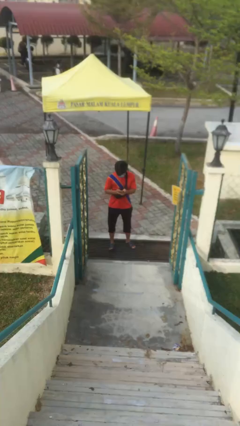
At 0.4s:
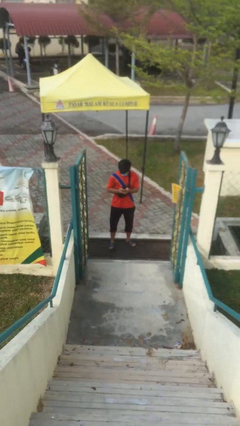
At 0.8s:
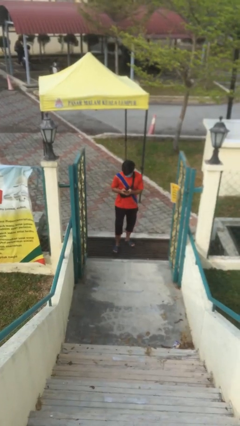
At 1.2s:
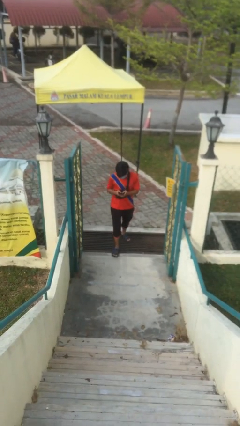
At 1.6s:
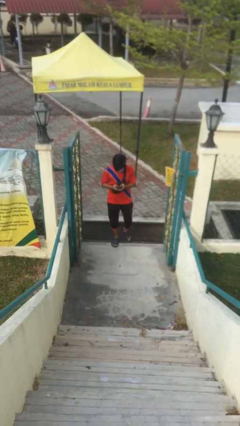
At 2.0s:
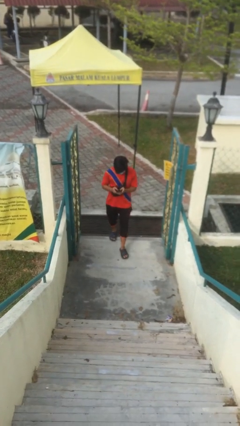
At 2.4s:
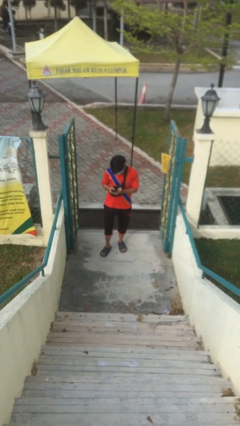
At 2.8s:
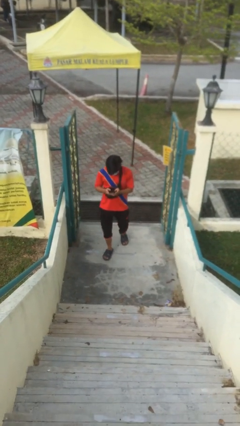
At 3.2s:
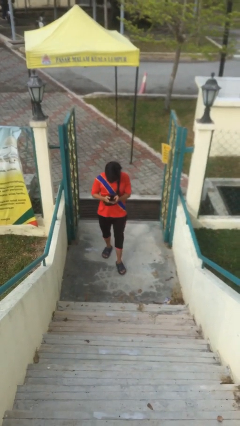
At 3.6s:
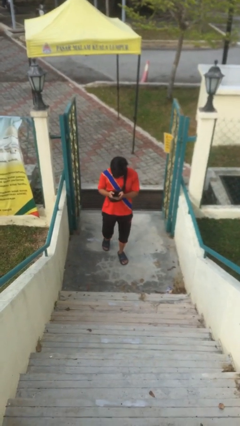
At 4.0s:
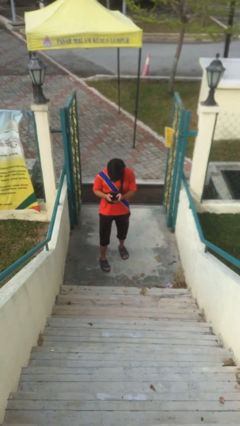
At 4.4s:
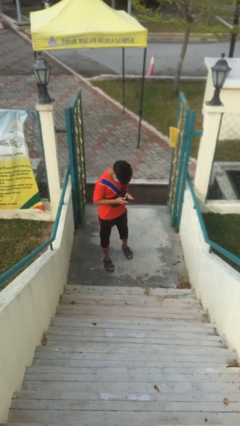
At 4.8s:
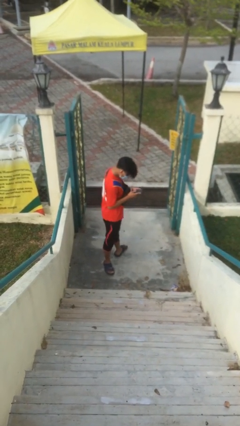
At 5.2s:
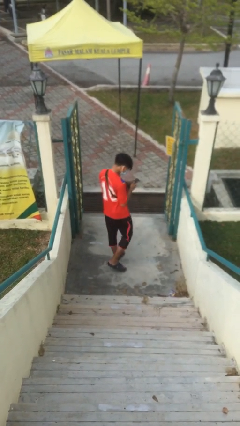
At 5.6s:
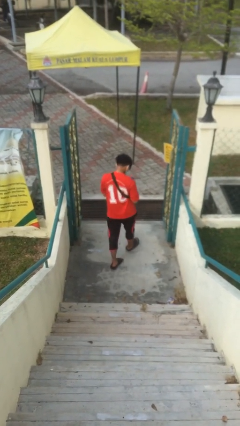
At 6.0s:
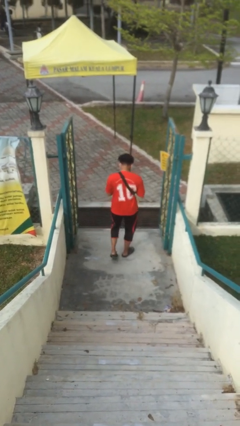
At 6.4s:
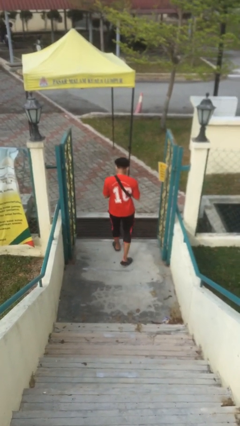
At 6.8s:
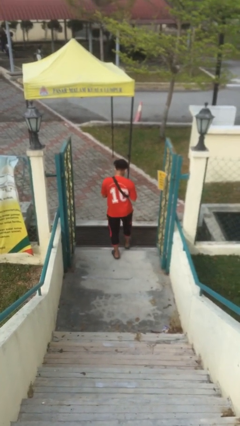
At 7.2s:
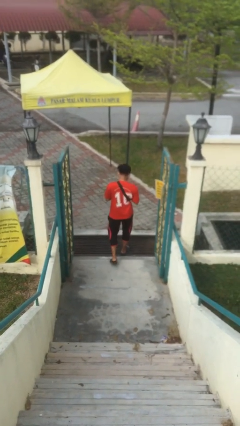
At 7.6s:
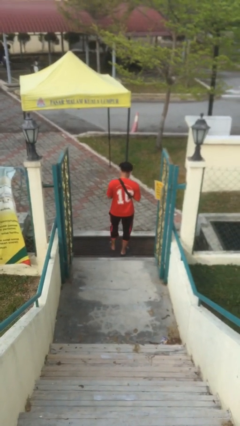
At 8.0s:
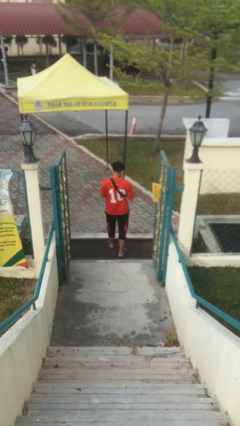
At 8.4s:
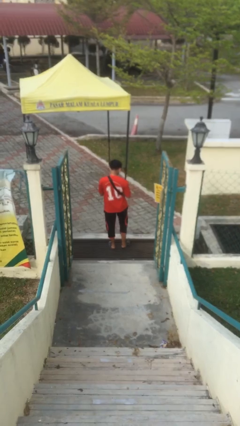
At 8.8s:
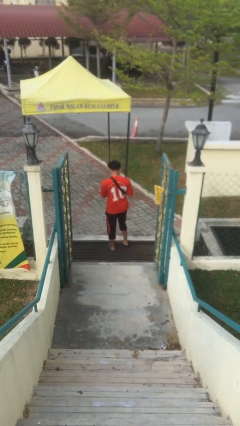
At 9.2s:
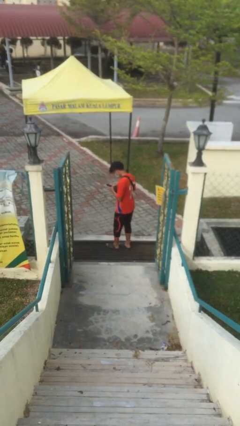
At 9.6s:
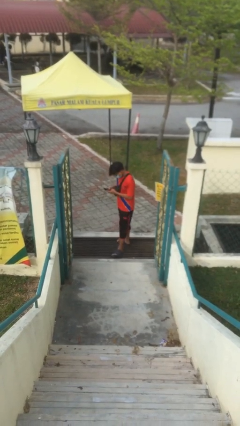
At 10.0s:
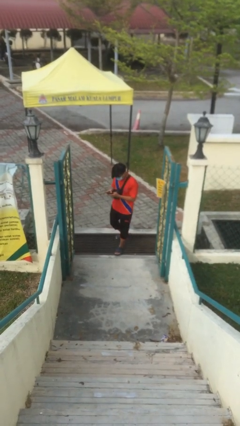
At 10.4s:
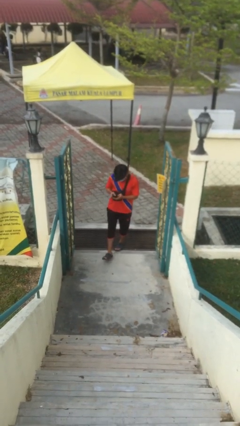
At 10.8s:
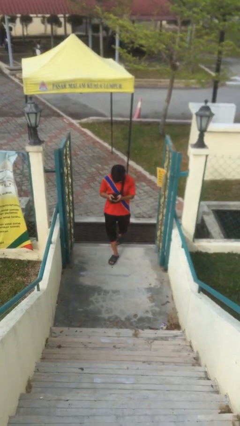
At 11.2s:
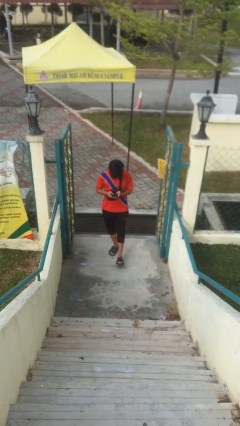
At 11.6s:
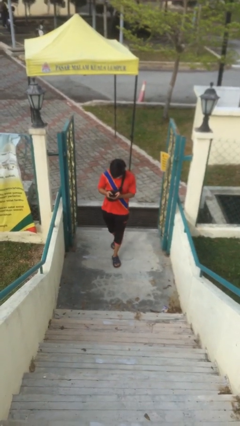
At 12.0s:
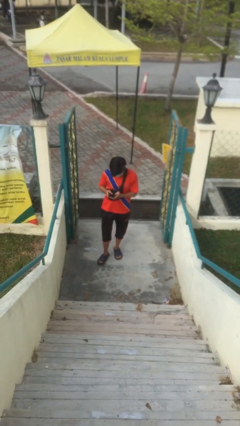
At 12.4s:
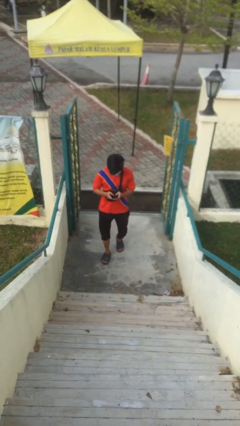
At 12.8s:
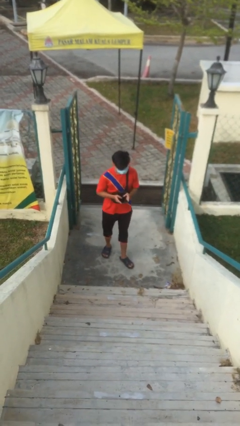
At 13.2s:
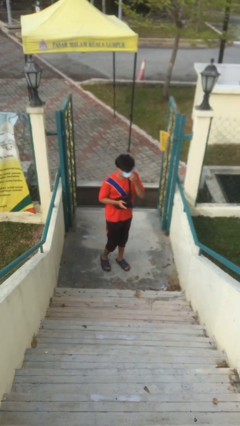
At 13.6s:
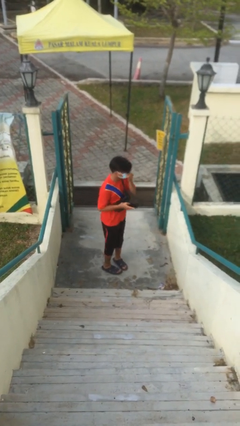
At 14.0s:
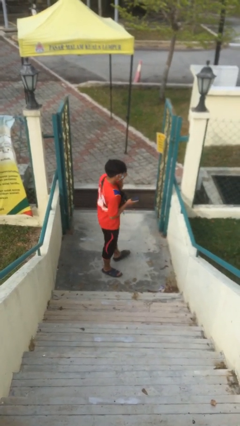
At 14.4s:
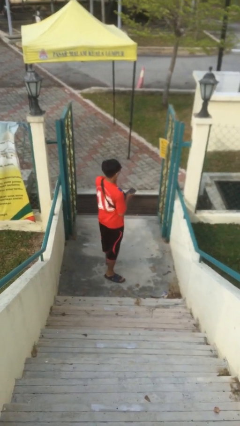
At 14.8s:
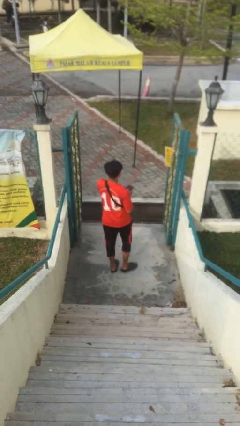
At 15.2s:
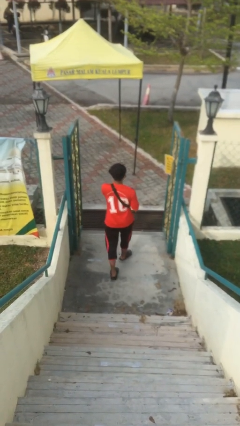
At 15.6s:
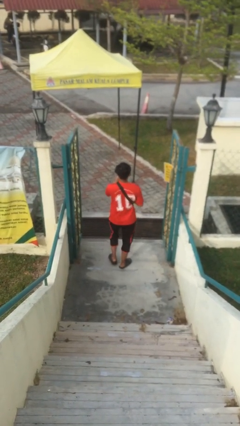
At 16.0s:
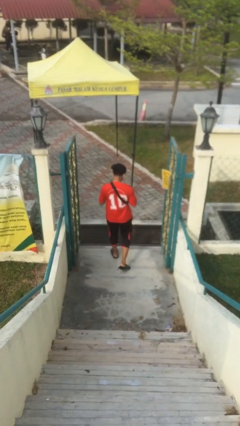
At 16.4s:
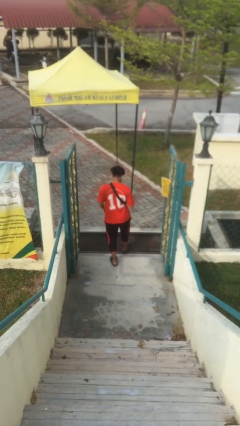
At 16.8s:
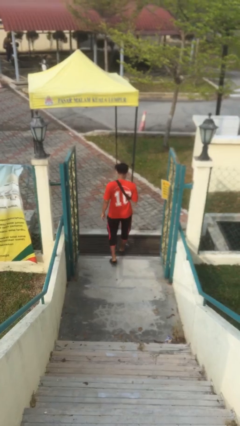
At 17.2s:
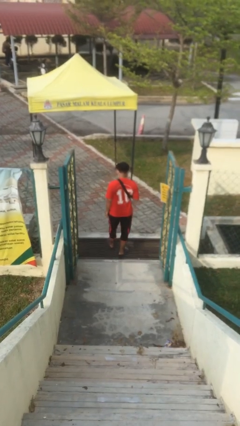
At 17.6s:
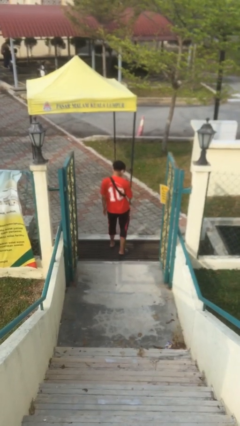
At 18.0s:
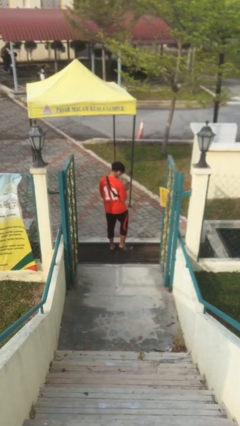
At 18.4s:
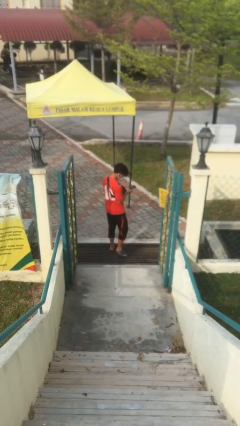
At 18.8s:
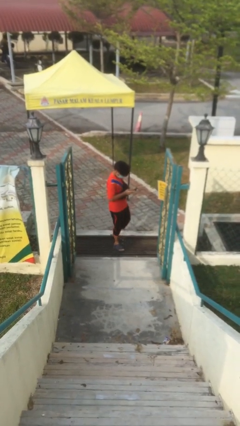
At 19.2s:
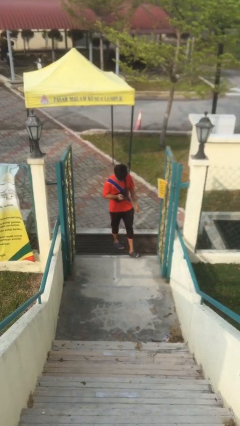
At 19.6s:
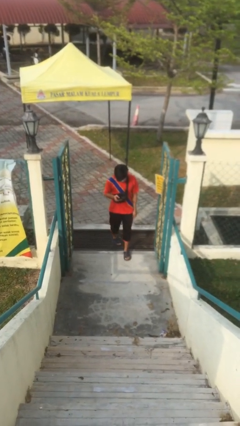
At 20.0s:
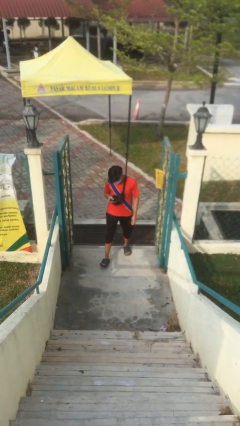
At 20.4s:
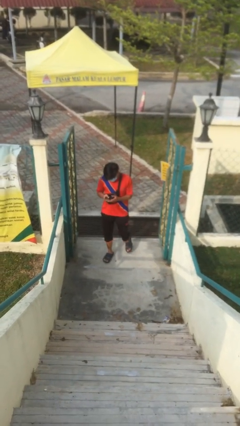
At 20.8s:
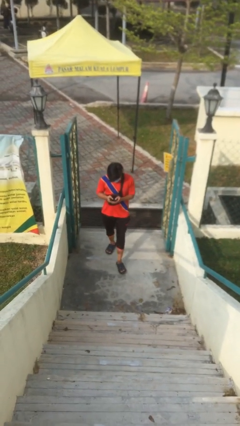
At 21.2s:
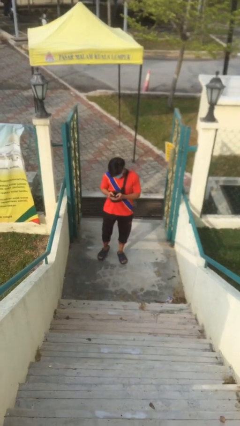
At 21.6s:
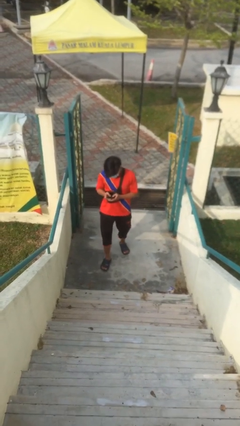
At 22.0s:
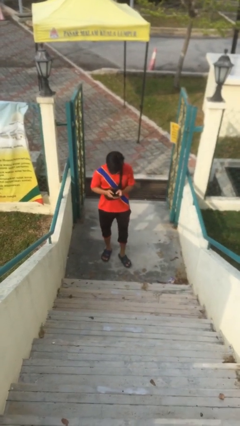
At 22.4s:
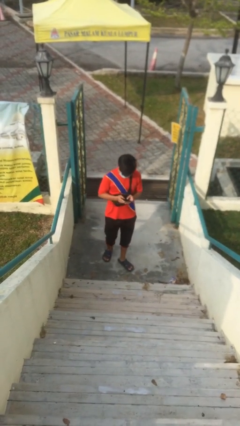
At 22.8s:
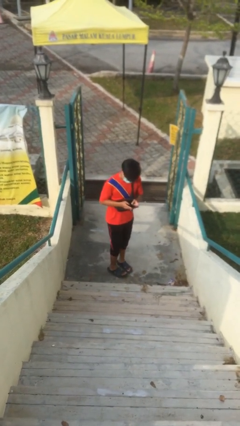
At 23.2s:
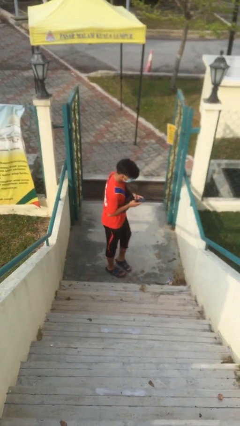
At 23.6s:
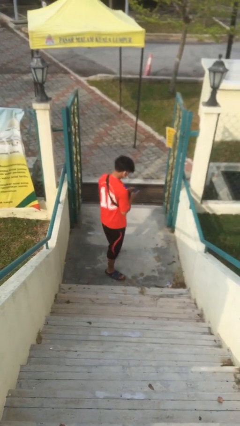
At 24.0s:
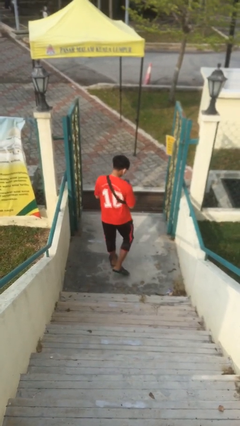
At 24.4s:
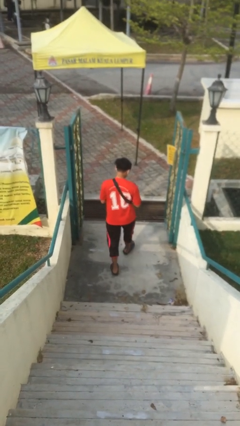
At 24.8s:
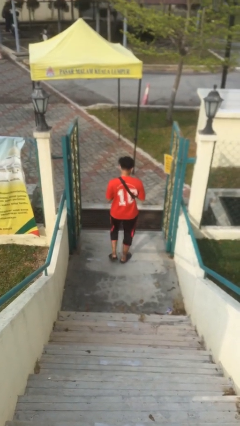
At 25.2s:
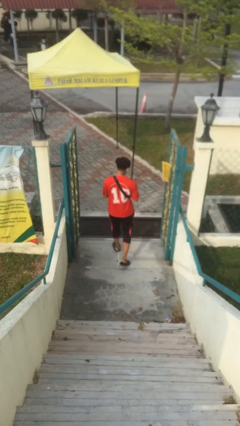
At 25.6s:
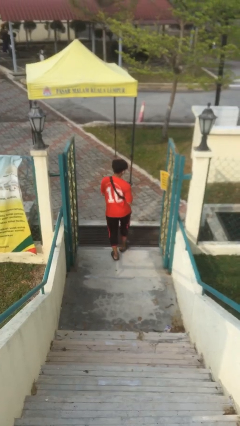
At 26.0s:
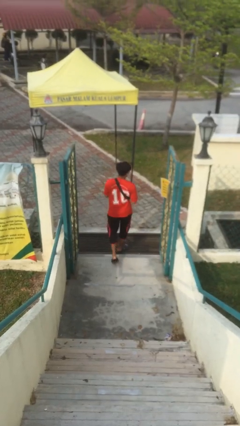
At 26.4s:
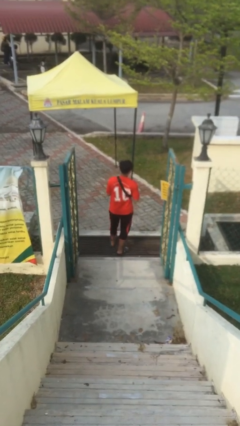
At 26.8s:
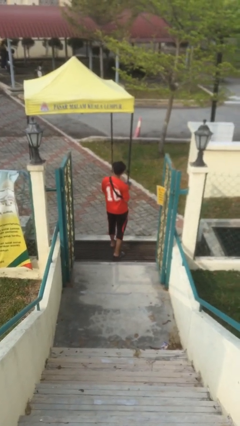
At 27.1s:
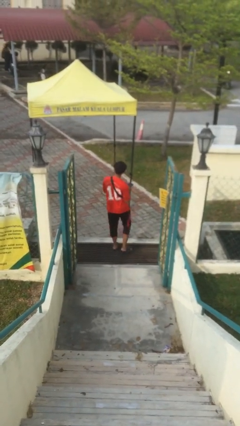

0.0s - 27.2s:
person texts on phone

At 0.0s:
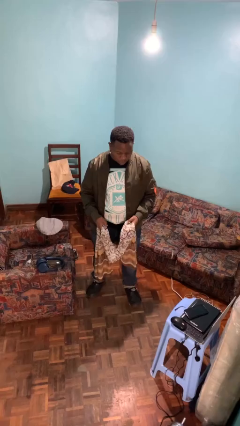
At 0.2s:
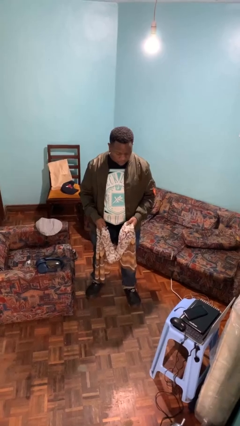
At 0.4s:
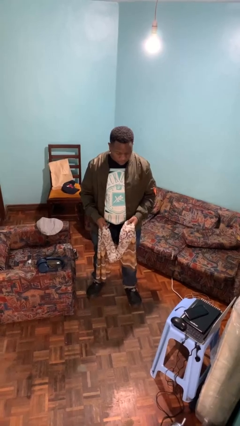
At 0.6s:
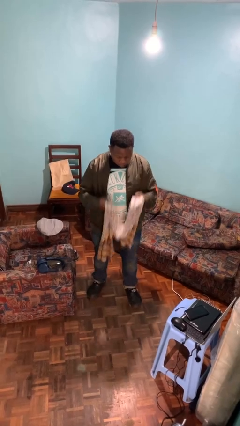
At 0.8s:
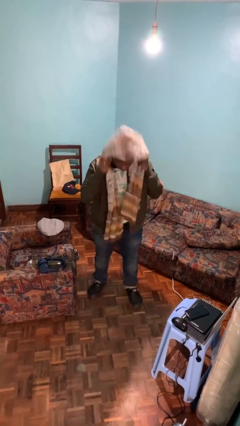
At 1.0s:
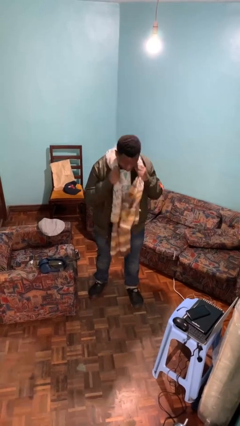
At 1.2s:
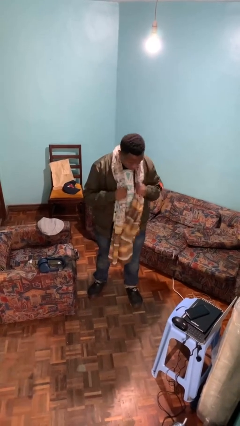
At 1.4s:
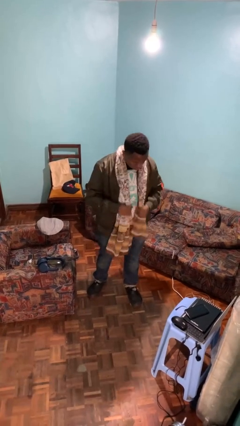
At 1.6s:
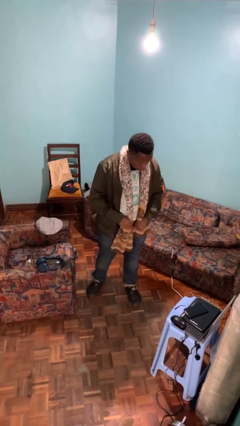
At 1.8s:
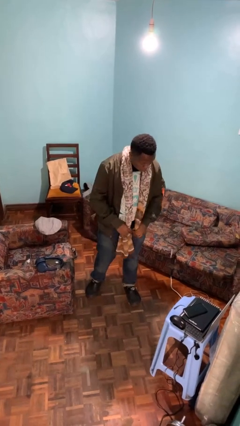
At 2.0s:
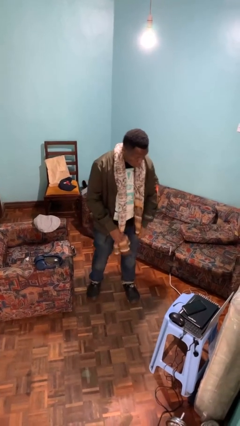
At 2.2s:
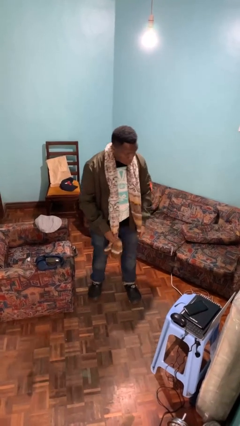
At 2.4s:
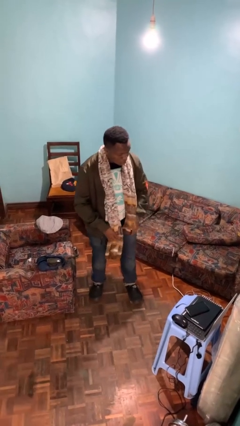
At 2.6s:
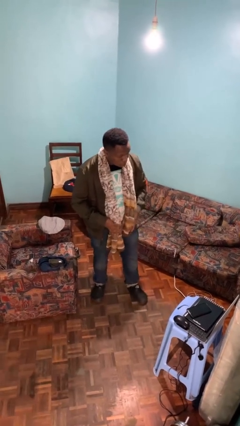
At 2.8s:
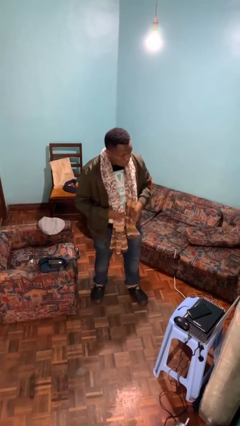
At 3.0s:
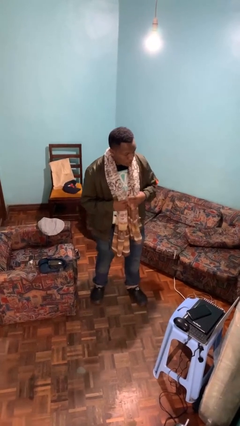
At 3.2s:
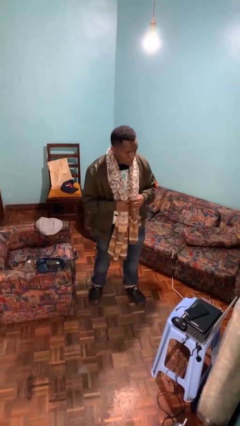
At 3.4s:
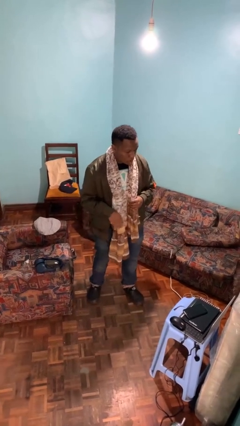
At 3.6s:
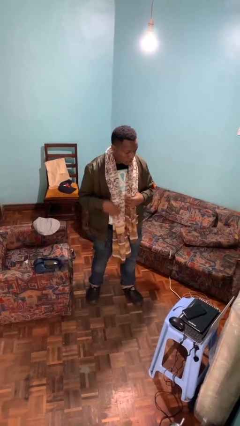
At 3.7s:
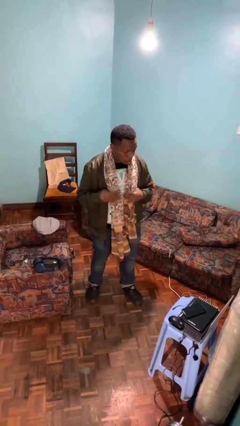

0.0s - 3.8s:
person puts on scarf

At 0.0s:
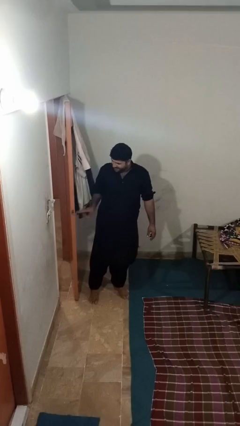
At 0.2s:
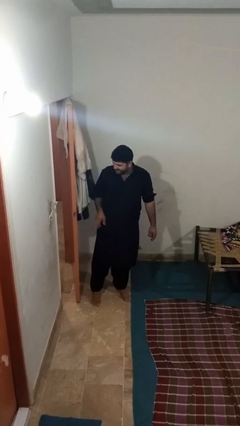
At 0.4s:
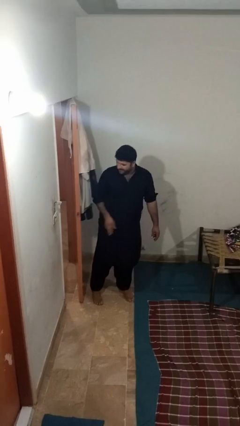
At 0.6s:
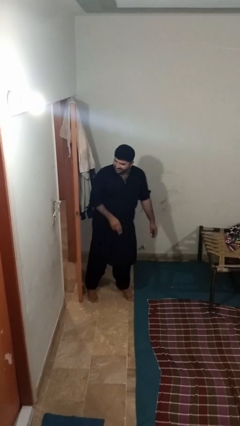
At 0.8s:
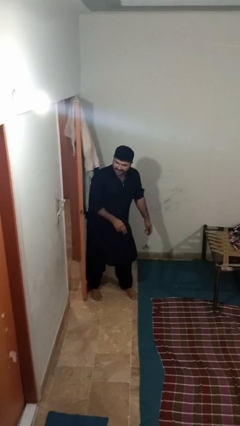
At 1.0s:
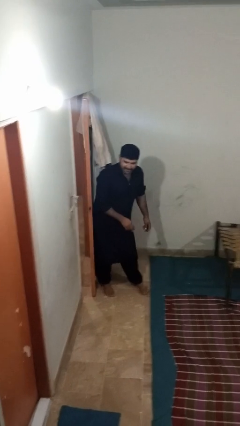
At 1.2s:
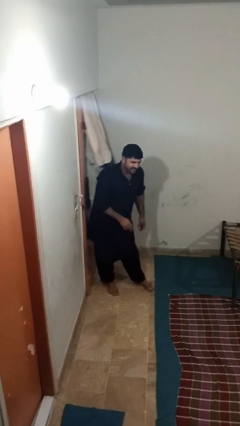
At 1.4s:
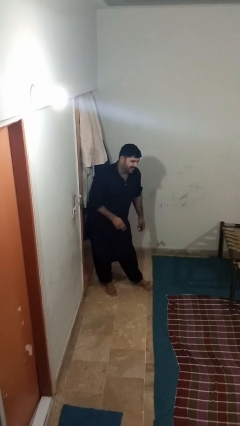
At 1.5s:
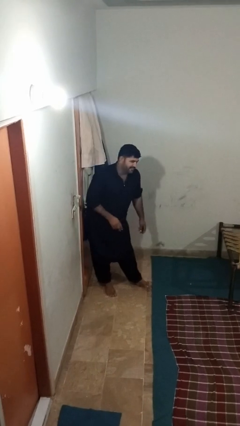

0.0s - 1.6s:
person closes door with hip
